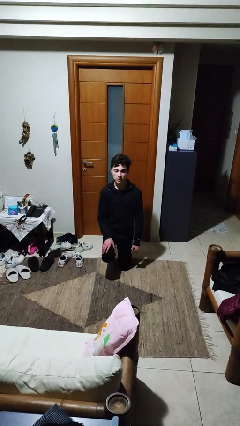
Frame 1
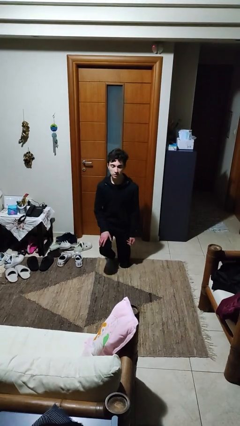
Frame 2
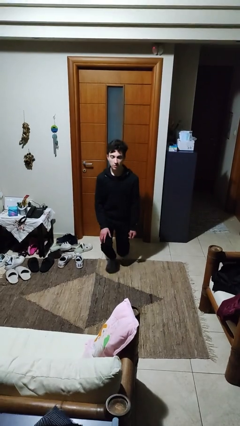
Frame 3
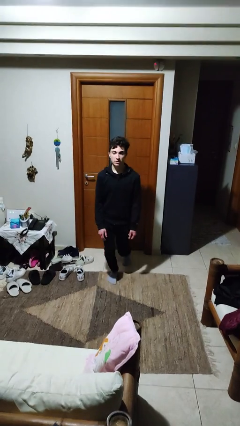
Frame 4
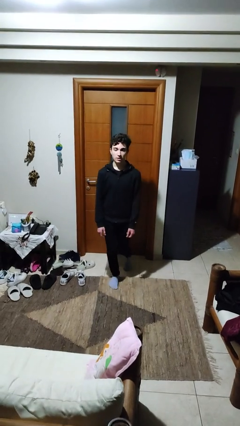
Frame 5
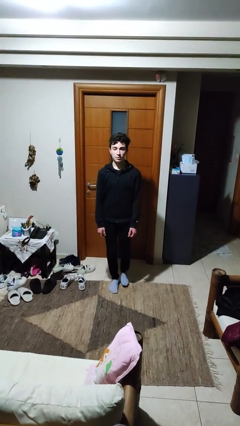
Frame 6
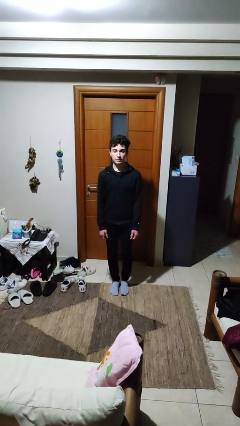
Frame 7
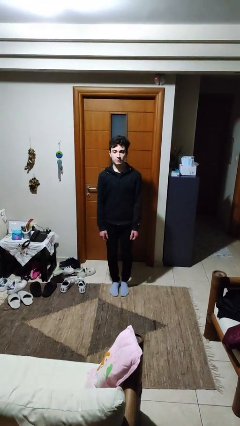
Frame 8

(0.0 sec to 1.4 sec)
person stands up from floor

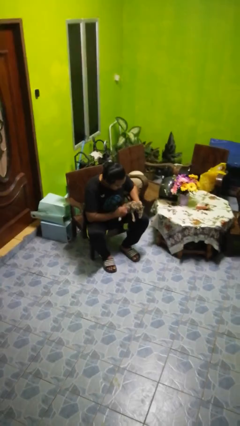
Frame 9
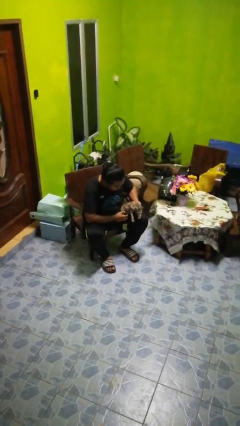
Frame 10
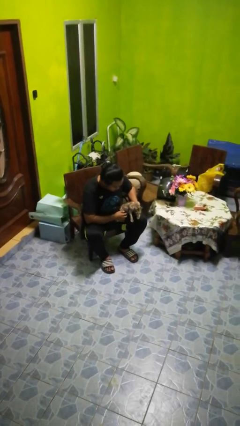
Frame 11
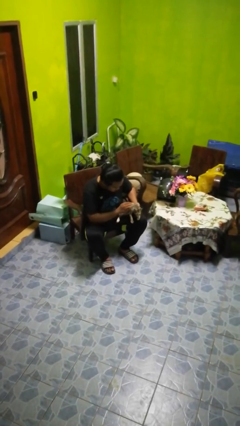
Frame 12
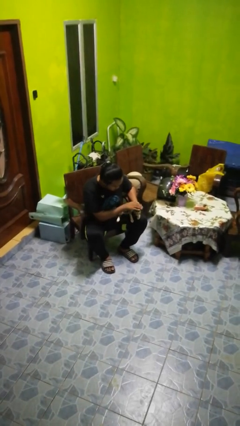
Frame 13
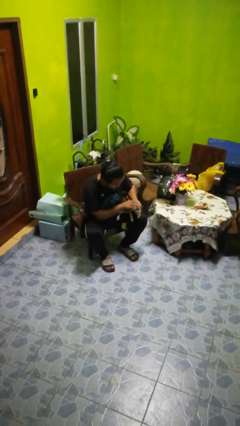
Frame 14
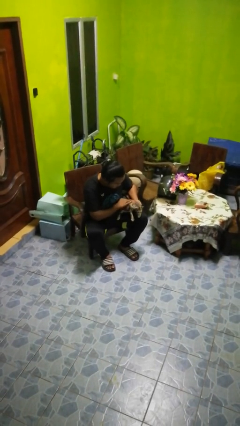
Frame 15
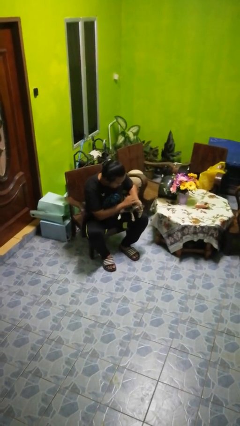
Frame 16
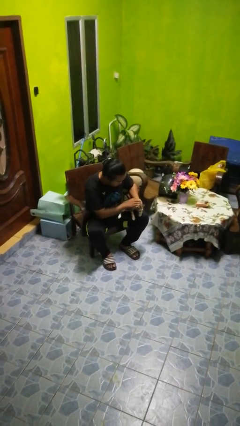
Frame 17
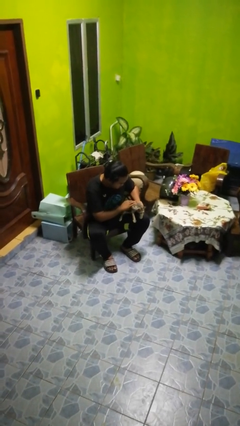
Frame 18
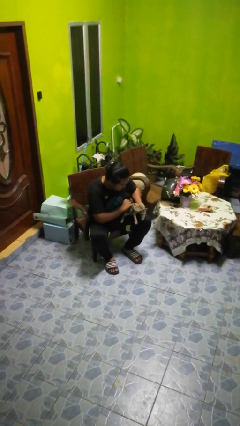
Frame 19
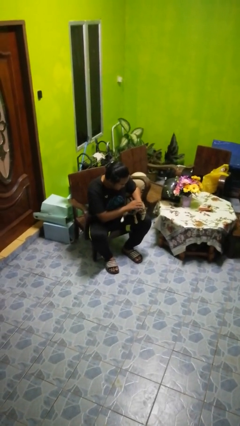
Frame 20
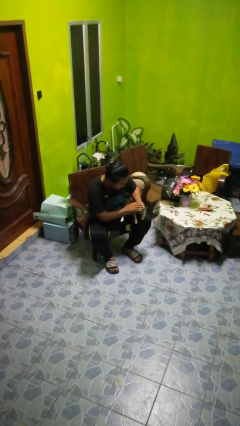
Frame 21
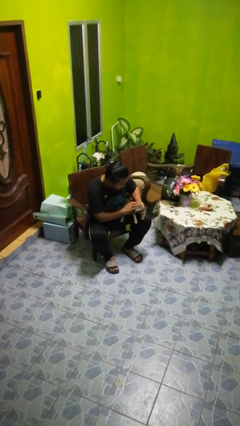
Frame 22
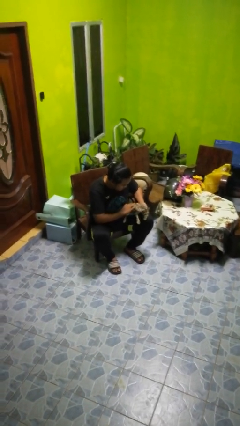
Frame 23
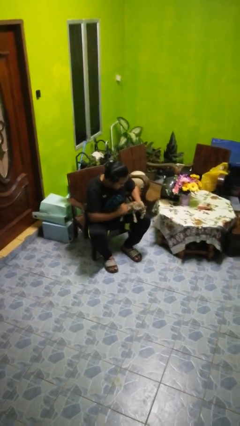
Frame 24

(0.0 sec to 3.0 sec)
person pets cat

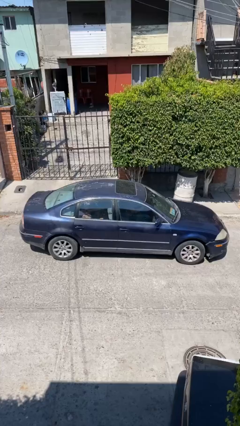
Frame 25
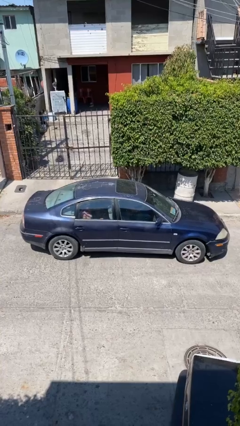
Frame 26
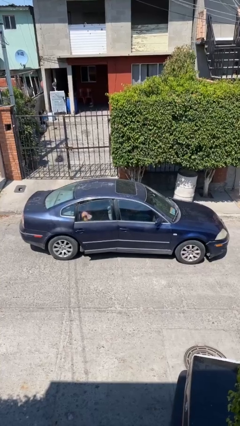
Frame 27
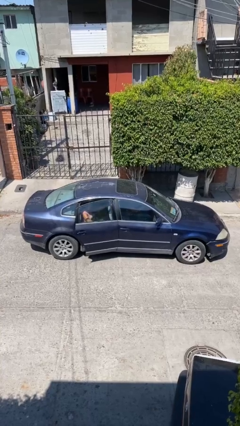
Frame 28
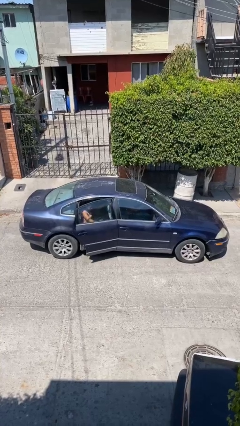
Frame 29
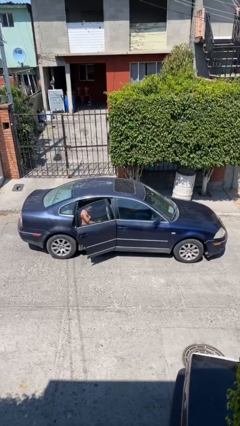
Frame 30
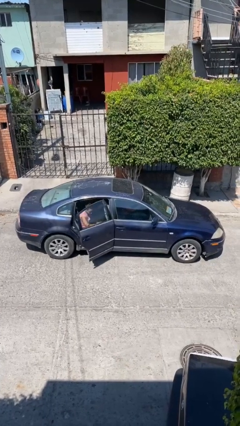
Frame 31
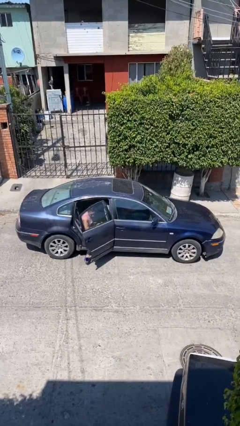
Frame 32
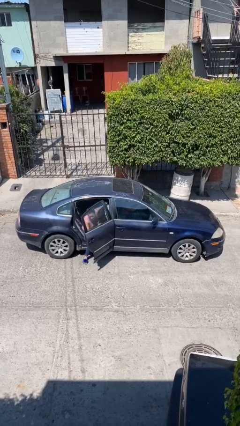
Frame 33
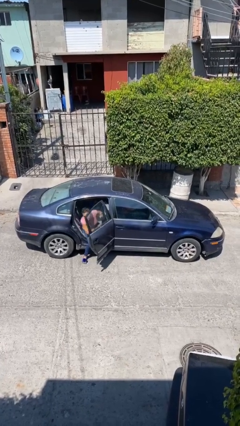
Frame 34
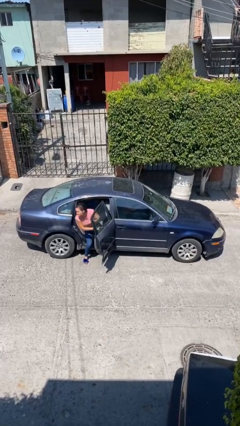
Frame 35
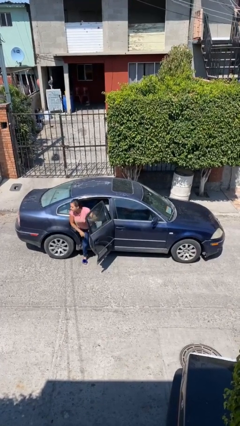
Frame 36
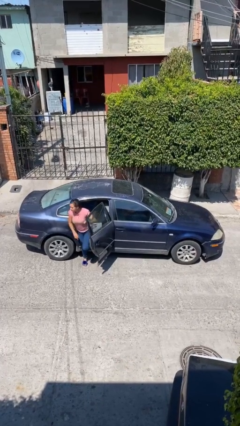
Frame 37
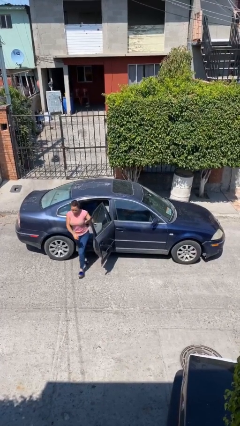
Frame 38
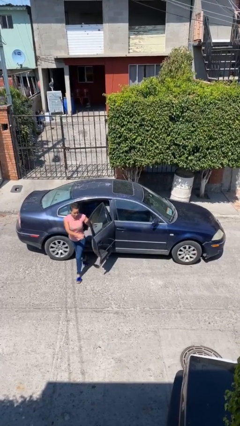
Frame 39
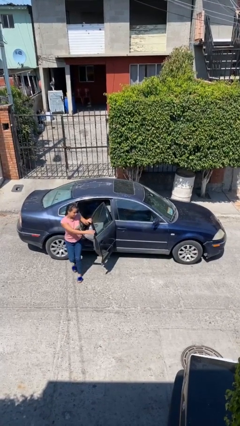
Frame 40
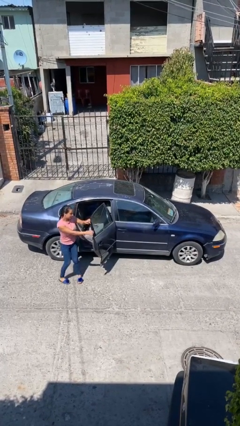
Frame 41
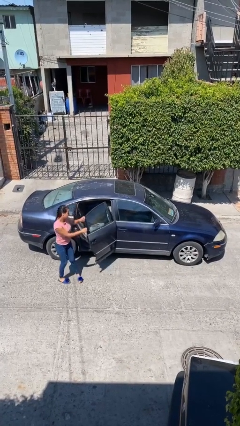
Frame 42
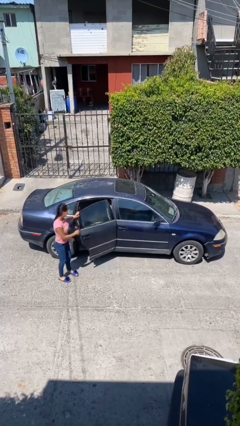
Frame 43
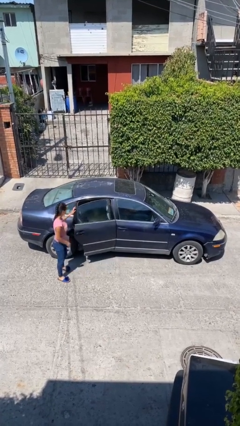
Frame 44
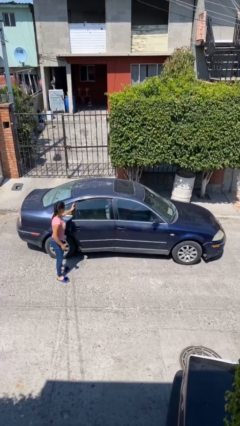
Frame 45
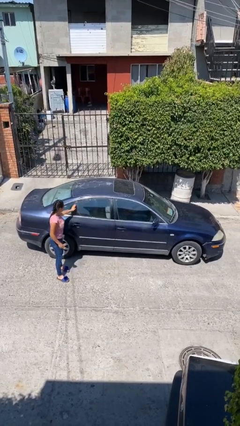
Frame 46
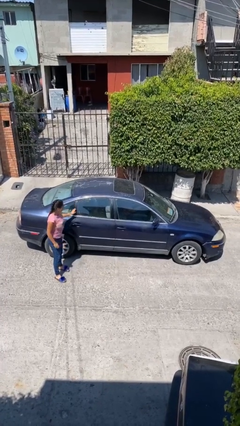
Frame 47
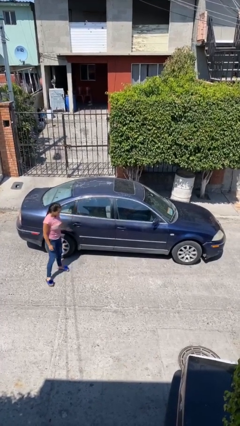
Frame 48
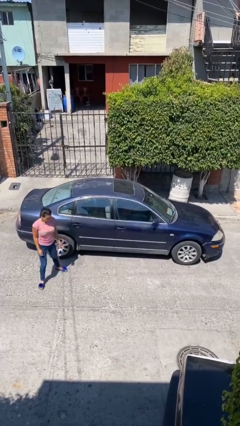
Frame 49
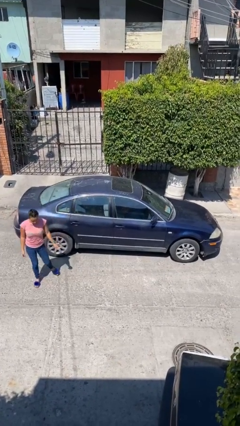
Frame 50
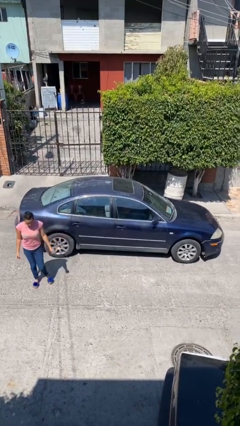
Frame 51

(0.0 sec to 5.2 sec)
car drops off person

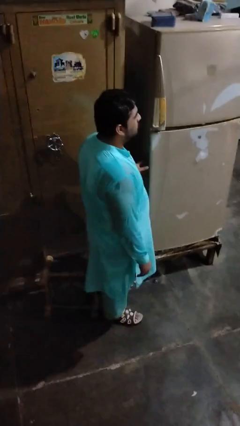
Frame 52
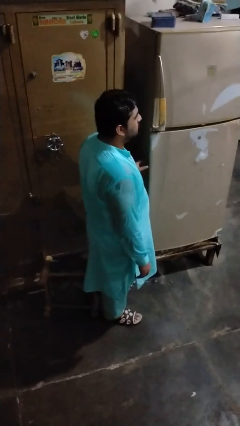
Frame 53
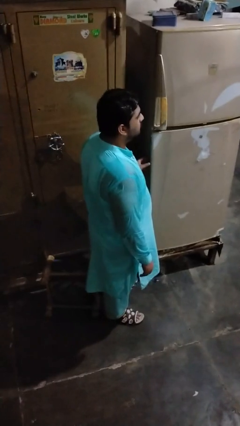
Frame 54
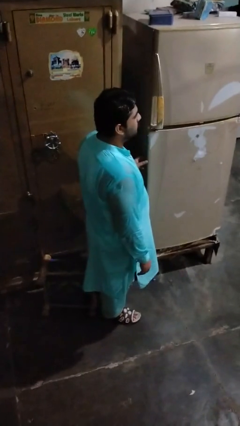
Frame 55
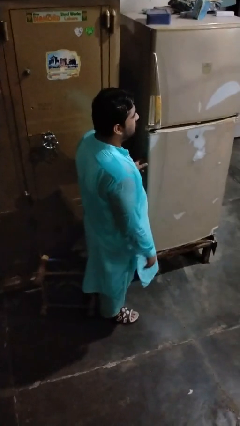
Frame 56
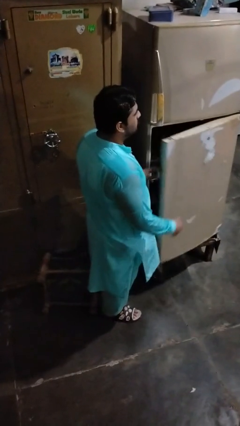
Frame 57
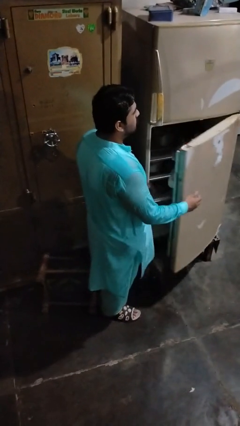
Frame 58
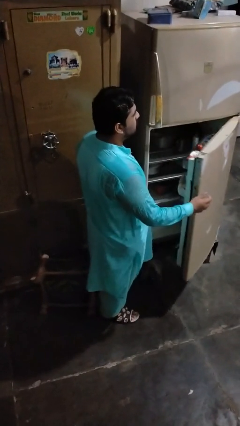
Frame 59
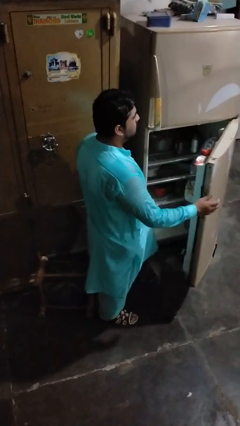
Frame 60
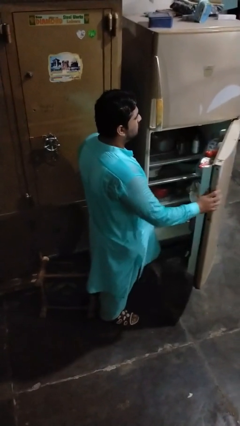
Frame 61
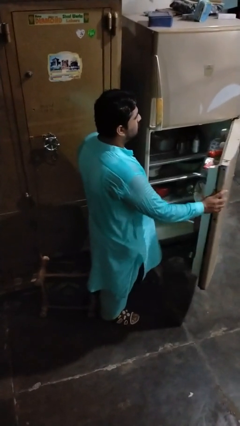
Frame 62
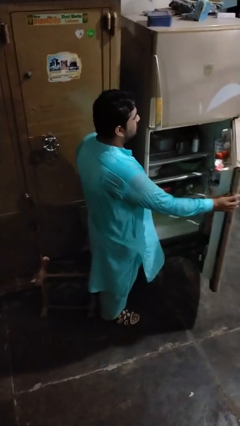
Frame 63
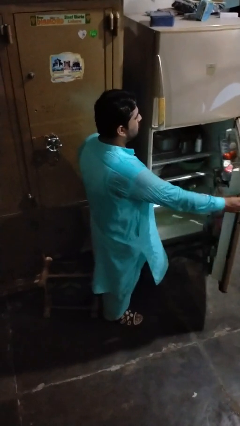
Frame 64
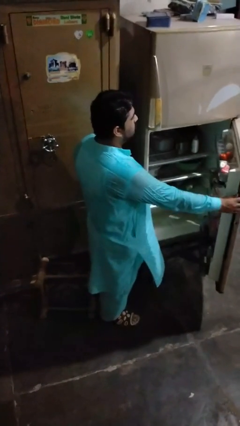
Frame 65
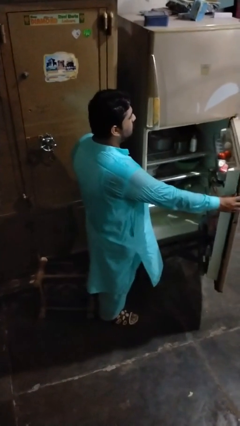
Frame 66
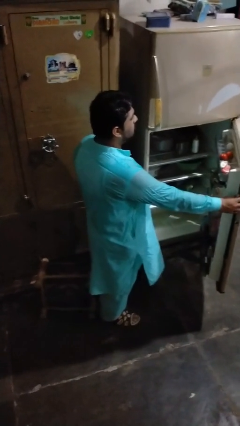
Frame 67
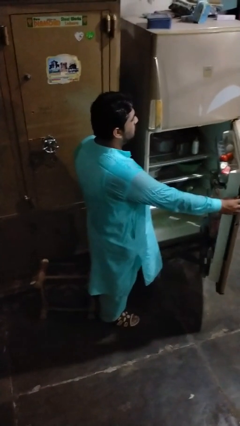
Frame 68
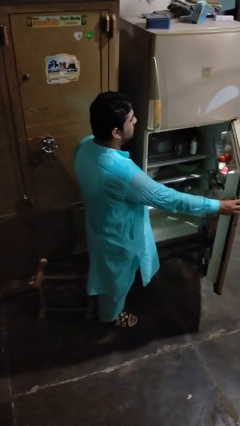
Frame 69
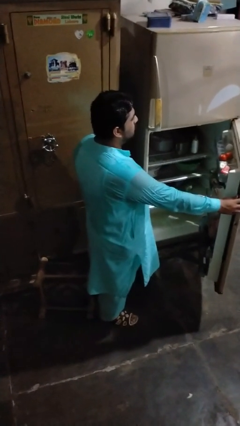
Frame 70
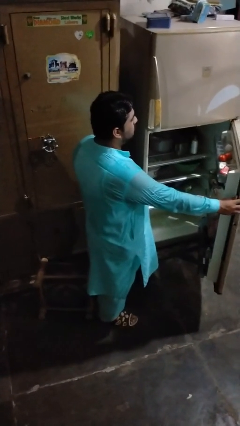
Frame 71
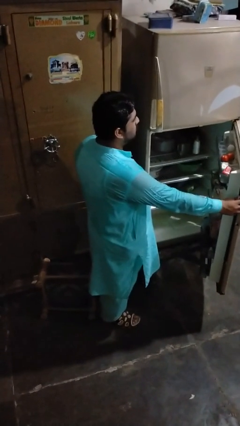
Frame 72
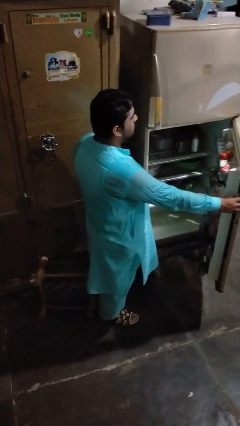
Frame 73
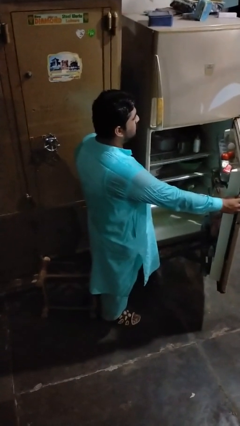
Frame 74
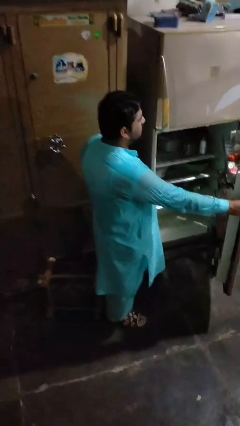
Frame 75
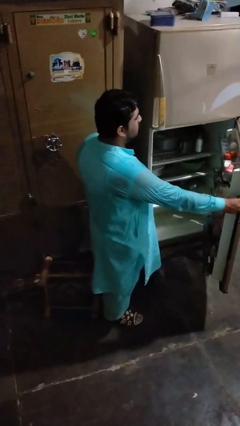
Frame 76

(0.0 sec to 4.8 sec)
person opens refrigerator

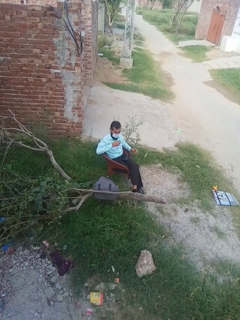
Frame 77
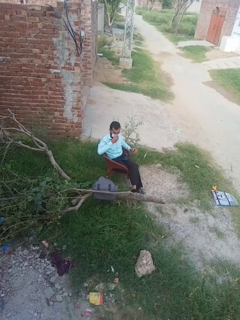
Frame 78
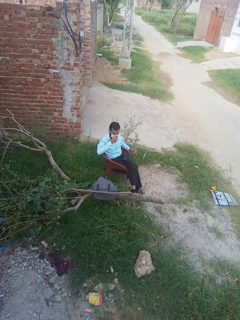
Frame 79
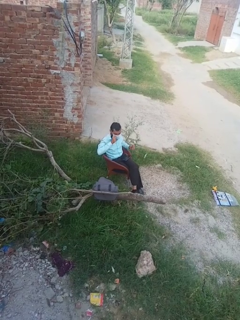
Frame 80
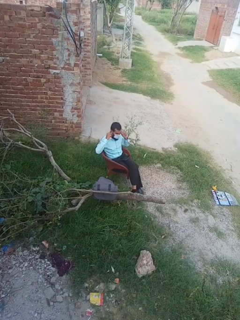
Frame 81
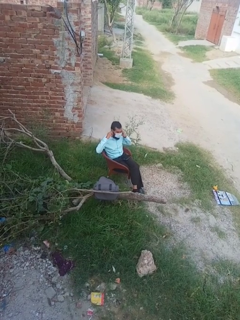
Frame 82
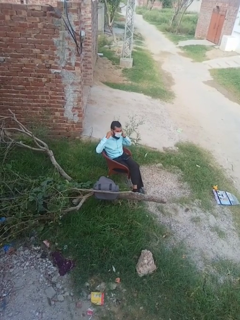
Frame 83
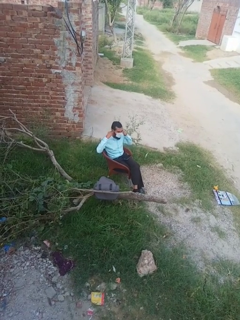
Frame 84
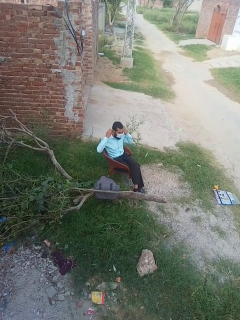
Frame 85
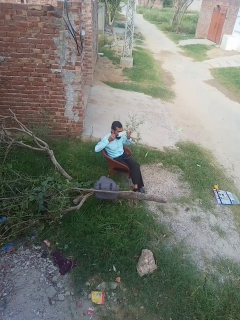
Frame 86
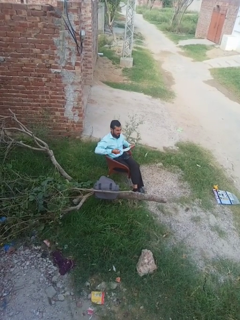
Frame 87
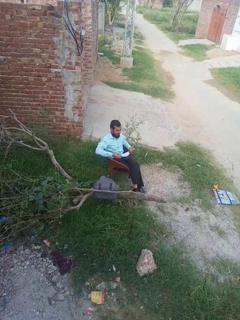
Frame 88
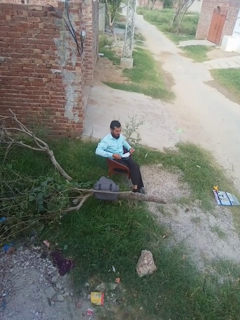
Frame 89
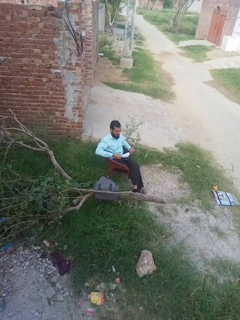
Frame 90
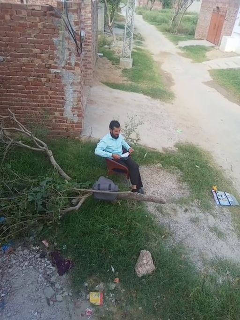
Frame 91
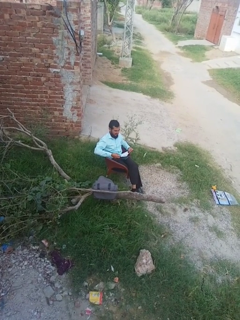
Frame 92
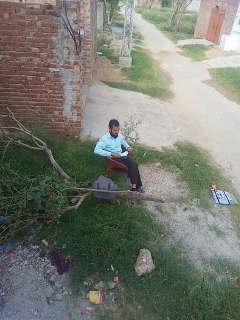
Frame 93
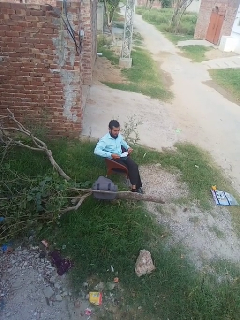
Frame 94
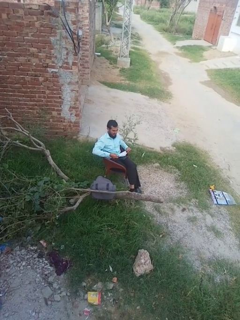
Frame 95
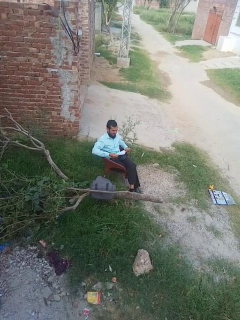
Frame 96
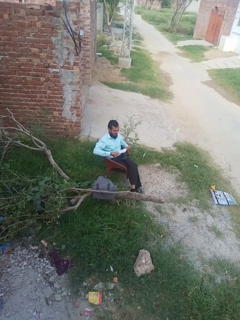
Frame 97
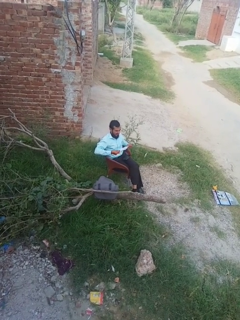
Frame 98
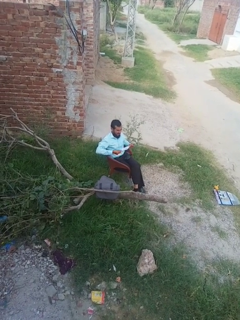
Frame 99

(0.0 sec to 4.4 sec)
person takes off facemask
